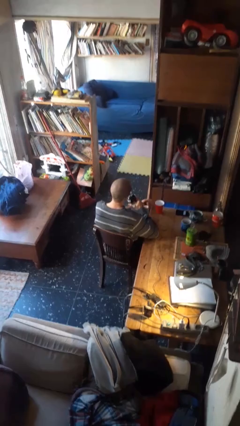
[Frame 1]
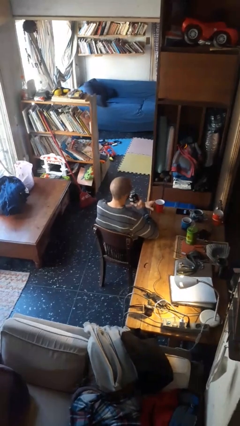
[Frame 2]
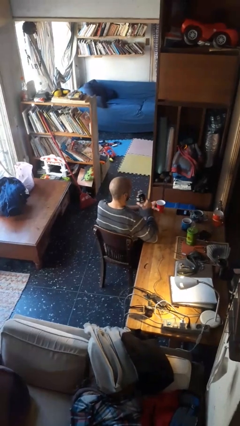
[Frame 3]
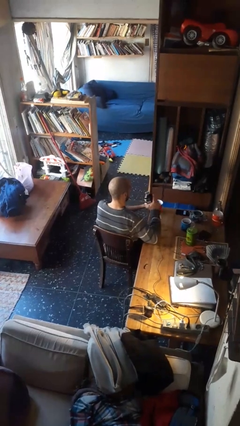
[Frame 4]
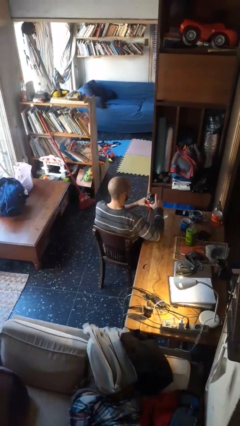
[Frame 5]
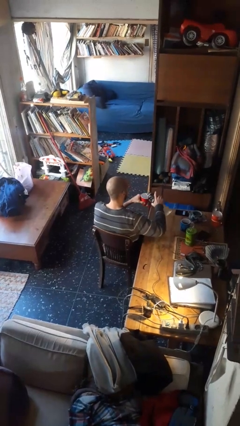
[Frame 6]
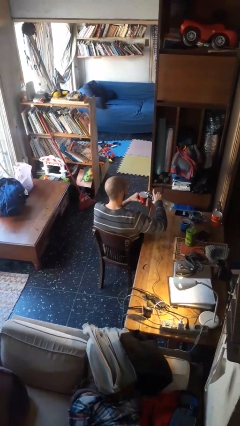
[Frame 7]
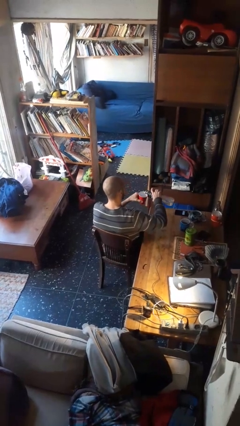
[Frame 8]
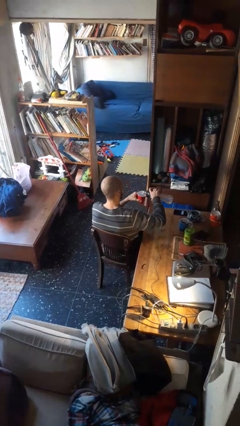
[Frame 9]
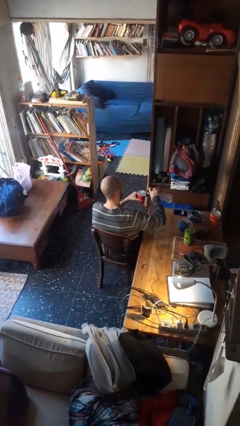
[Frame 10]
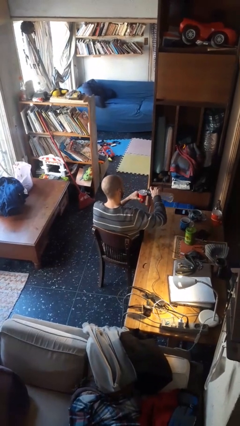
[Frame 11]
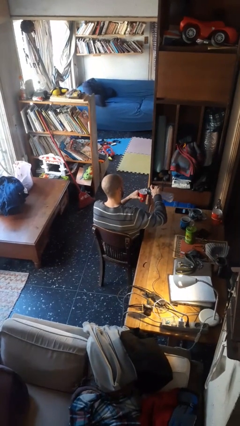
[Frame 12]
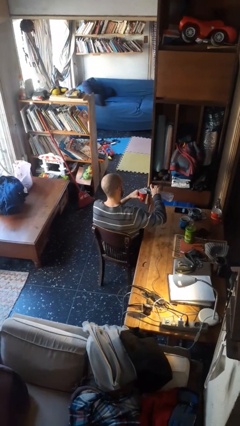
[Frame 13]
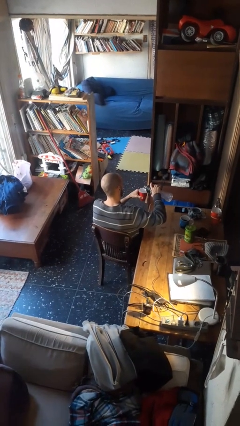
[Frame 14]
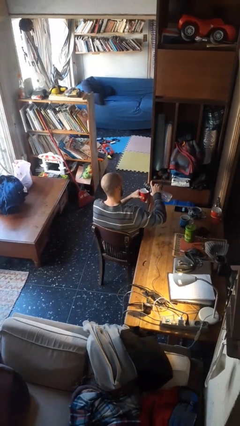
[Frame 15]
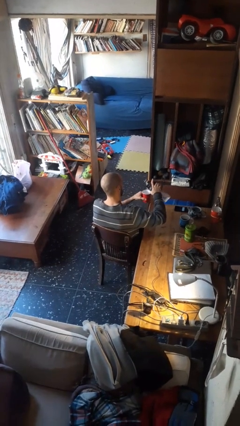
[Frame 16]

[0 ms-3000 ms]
person pours liquid into cup

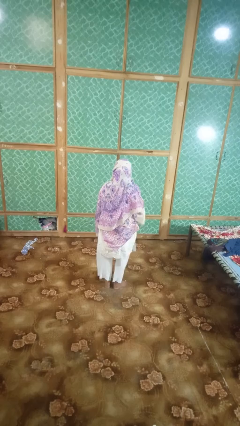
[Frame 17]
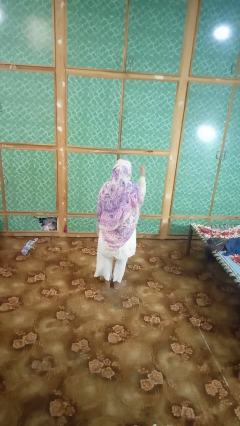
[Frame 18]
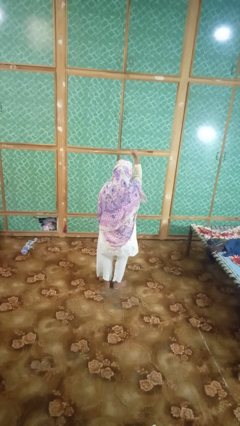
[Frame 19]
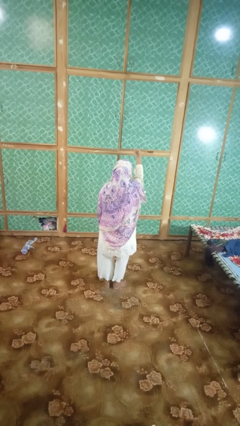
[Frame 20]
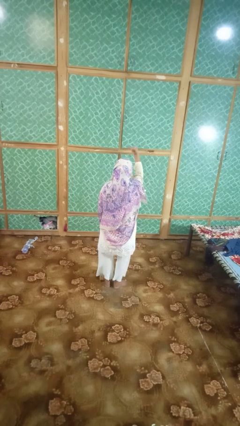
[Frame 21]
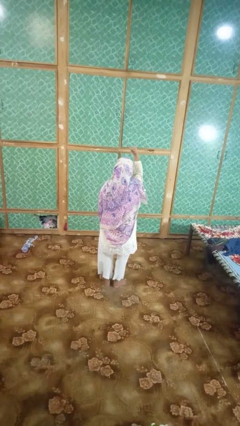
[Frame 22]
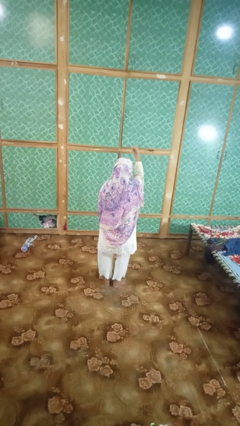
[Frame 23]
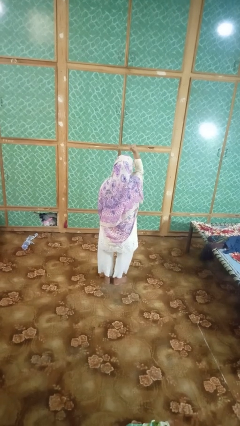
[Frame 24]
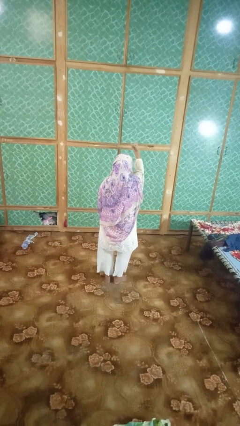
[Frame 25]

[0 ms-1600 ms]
person gestures hang loose

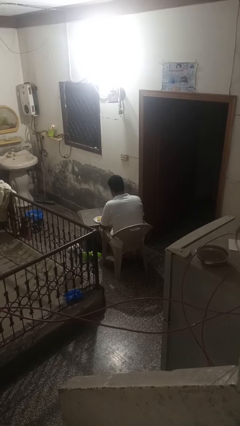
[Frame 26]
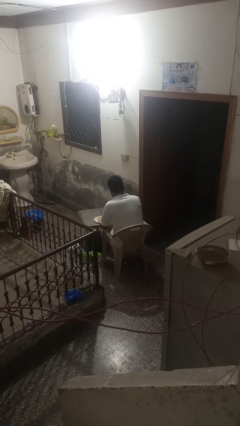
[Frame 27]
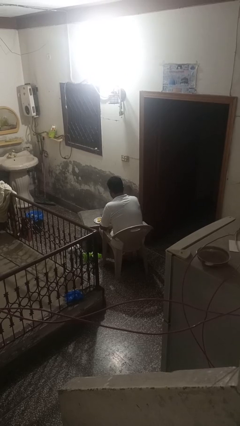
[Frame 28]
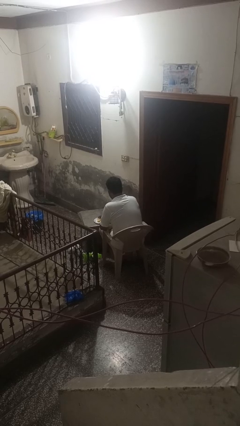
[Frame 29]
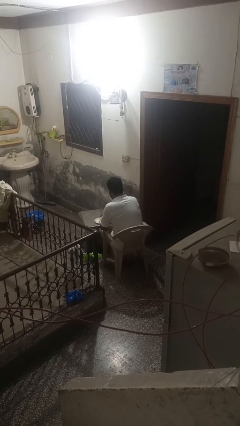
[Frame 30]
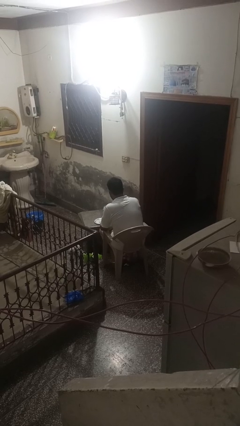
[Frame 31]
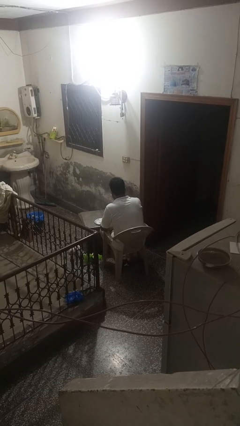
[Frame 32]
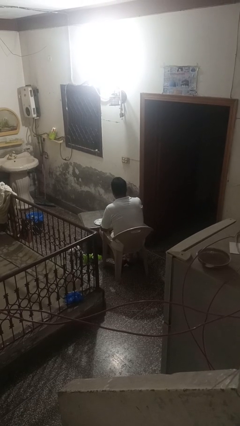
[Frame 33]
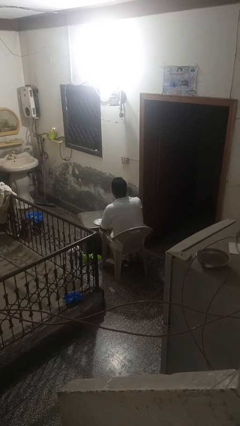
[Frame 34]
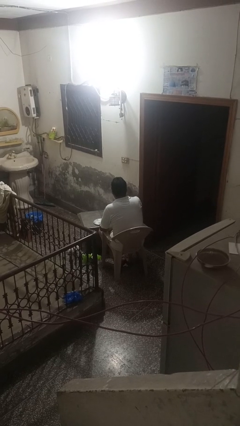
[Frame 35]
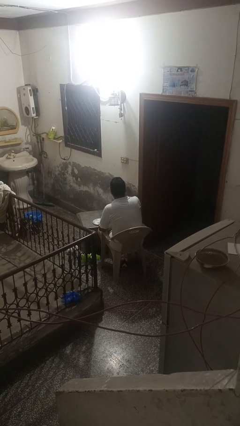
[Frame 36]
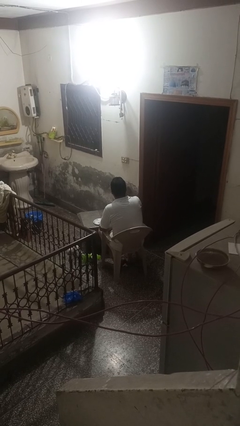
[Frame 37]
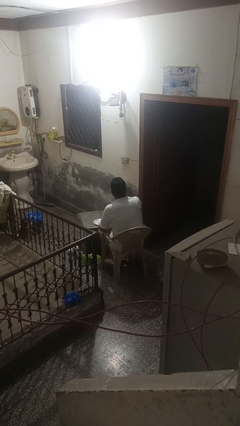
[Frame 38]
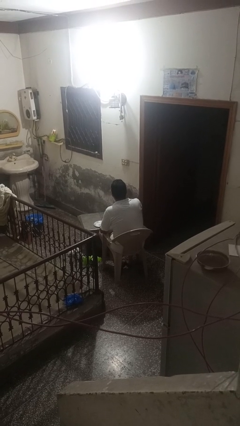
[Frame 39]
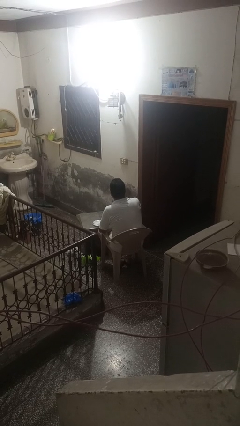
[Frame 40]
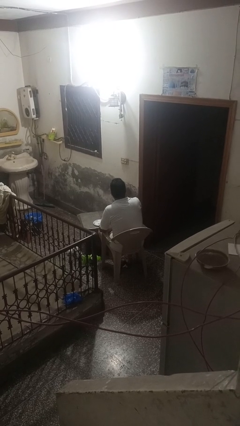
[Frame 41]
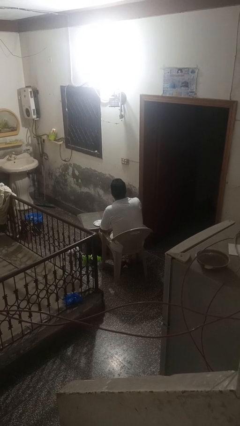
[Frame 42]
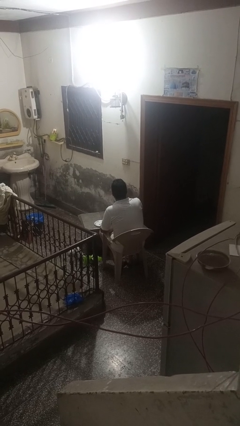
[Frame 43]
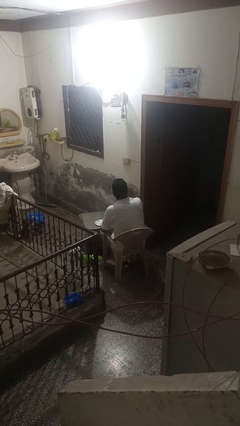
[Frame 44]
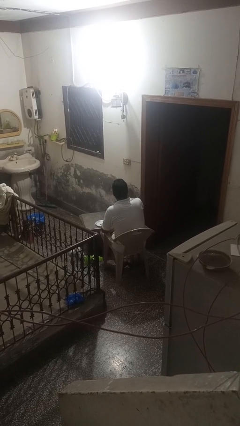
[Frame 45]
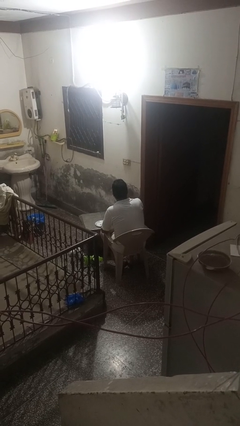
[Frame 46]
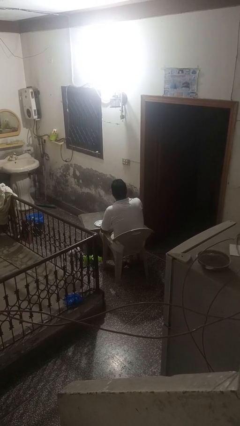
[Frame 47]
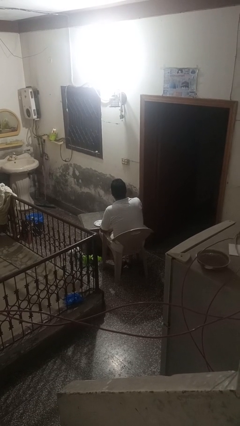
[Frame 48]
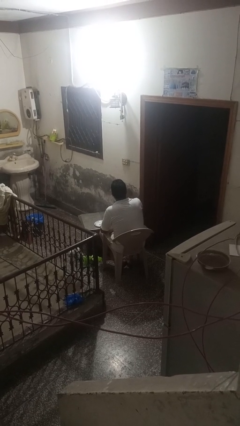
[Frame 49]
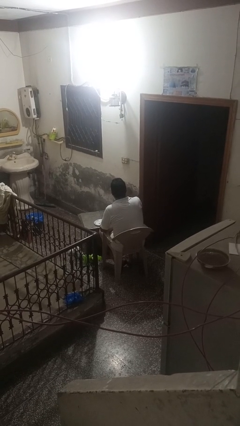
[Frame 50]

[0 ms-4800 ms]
person eats with hands

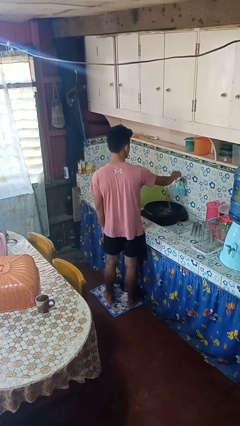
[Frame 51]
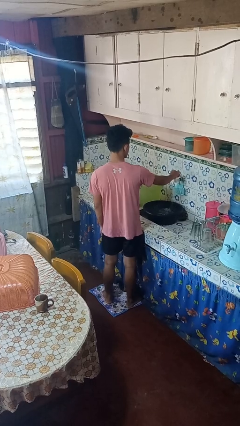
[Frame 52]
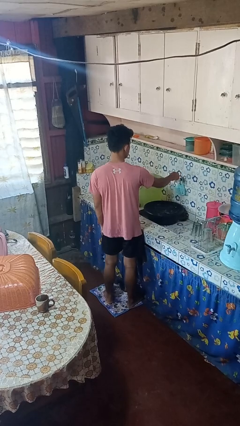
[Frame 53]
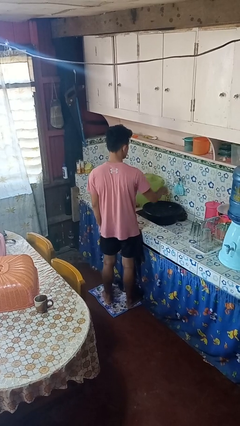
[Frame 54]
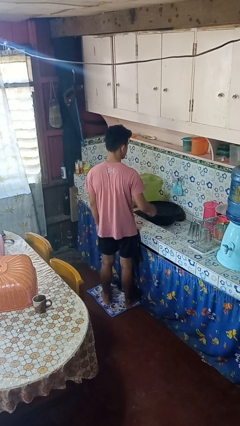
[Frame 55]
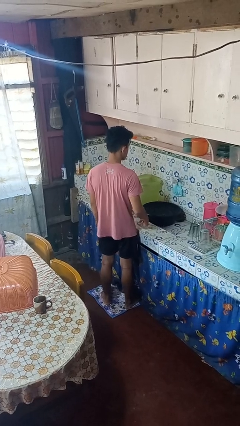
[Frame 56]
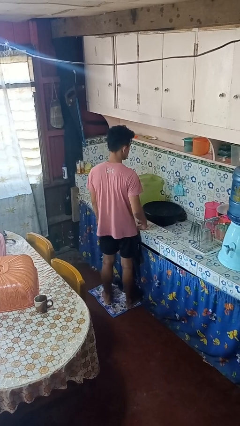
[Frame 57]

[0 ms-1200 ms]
person turns off faucet

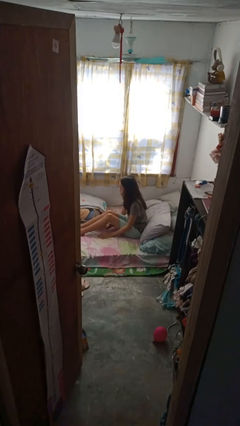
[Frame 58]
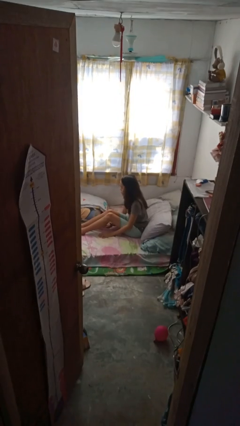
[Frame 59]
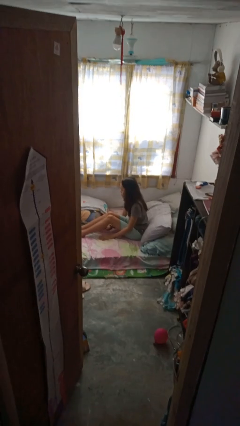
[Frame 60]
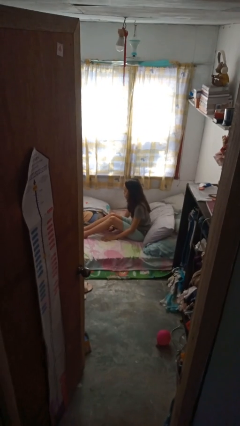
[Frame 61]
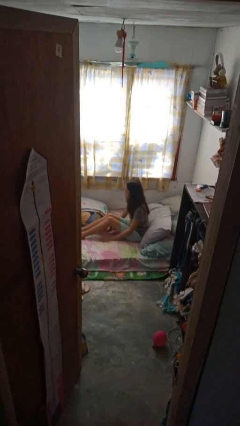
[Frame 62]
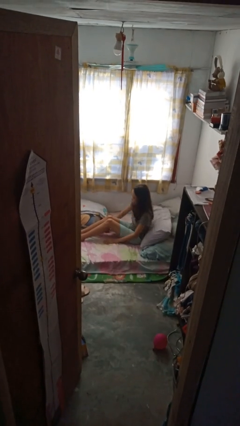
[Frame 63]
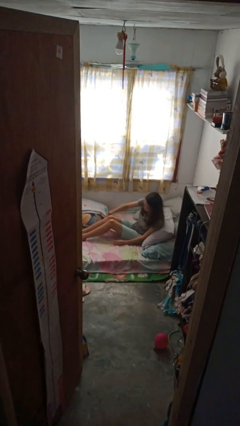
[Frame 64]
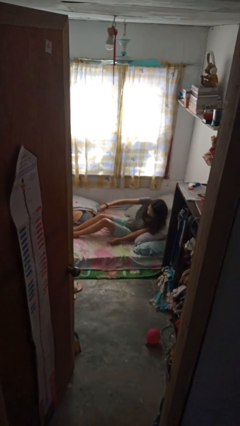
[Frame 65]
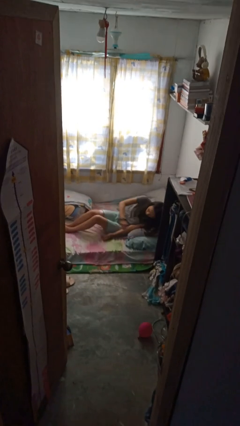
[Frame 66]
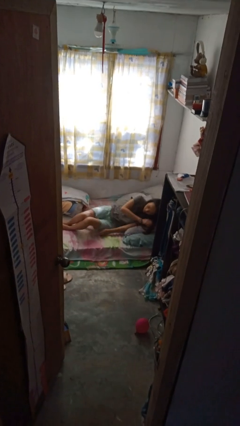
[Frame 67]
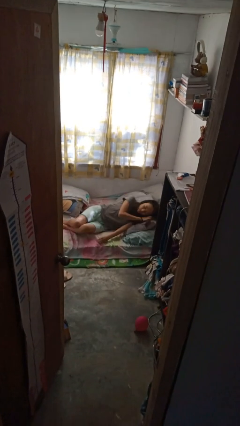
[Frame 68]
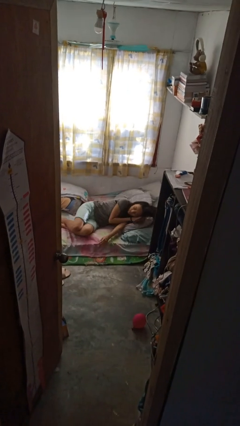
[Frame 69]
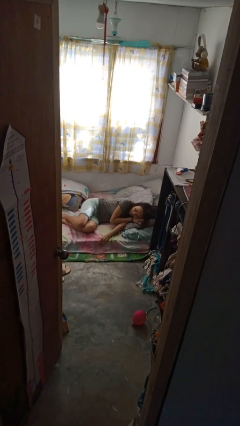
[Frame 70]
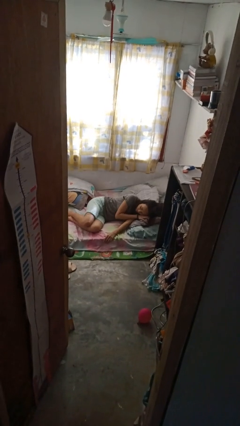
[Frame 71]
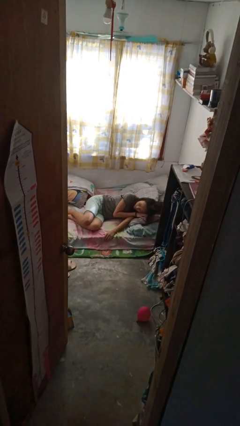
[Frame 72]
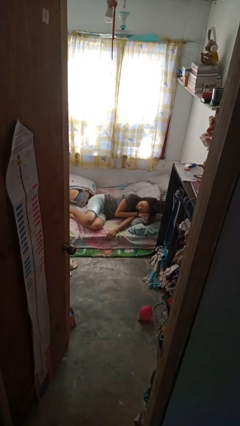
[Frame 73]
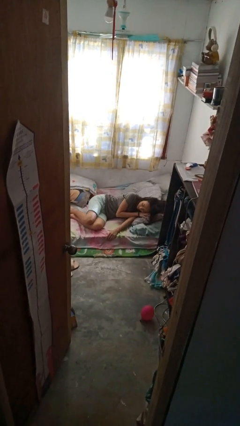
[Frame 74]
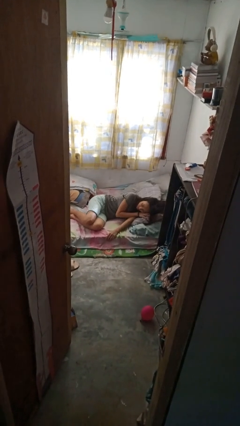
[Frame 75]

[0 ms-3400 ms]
person lies down on bed

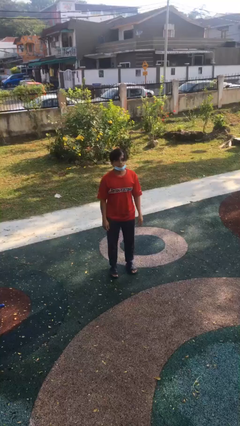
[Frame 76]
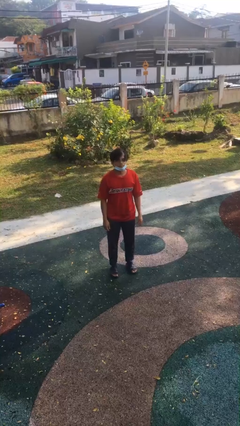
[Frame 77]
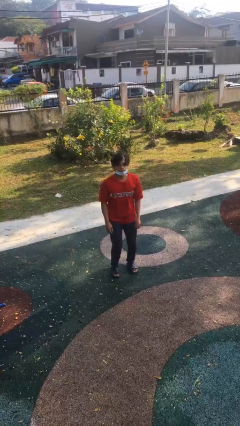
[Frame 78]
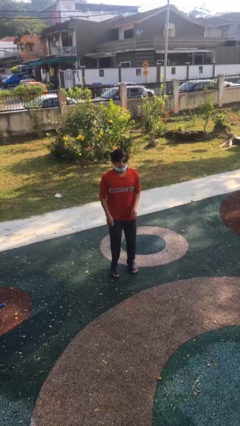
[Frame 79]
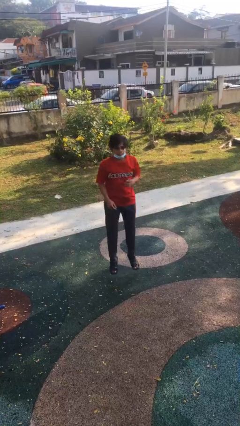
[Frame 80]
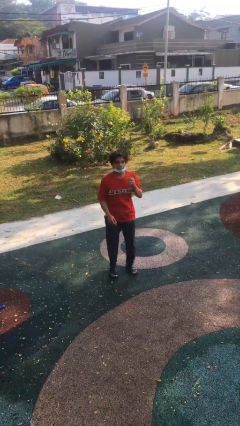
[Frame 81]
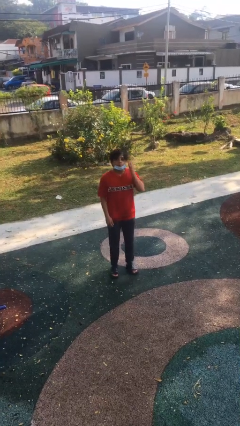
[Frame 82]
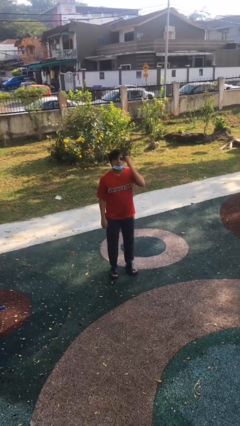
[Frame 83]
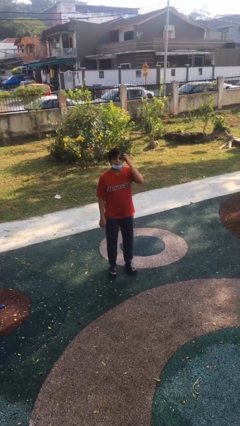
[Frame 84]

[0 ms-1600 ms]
person jumps

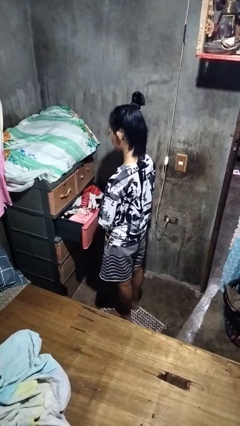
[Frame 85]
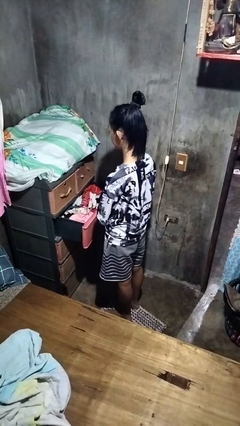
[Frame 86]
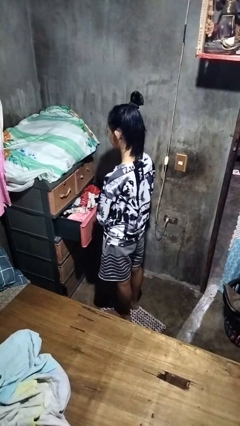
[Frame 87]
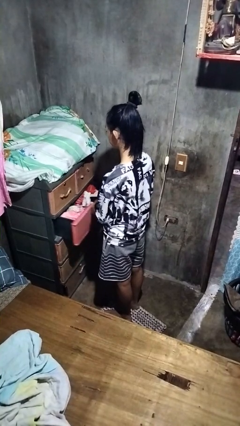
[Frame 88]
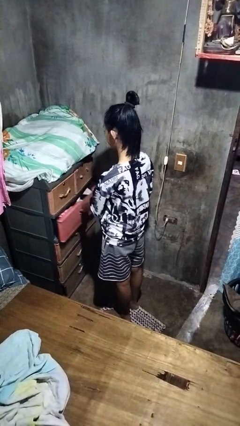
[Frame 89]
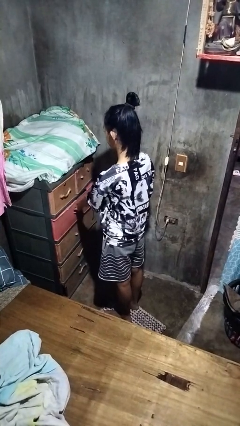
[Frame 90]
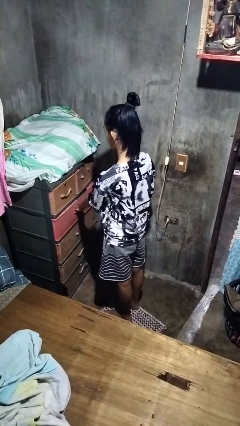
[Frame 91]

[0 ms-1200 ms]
person closes dresser drawer

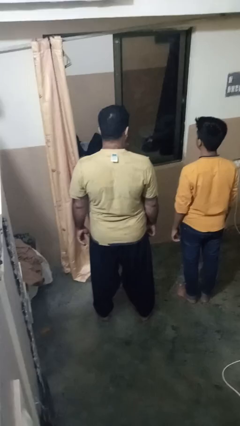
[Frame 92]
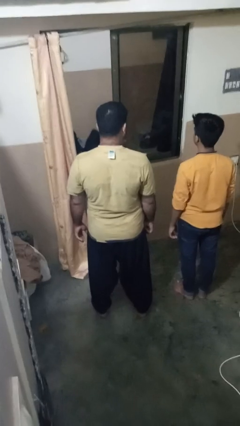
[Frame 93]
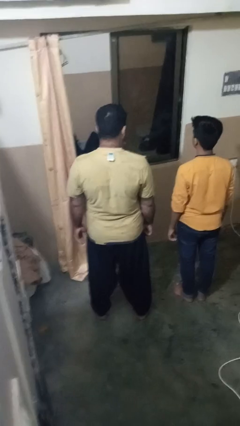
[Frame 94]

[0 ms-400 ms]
person nudges person with elbow
